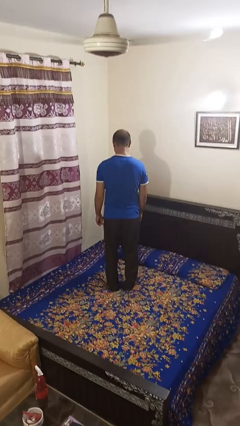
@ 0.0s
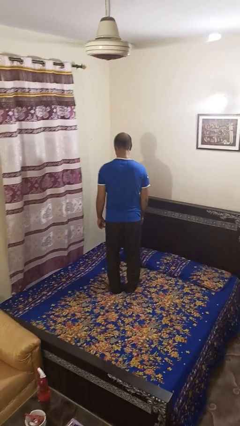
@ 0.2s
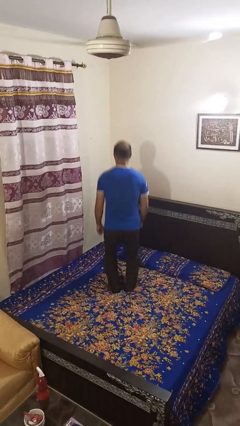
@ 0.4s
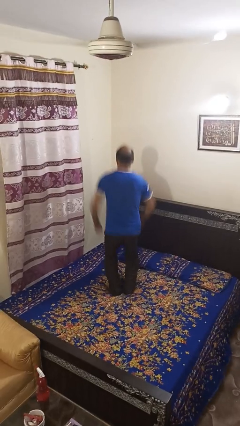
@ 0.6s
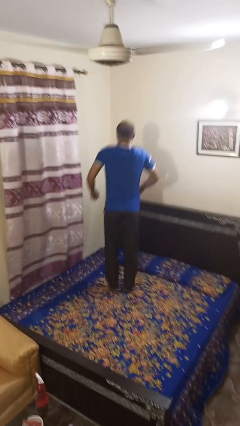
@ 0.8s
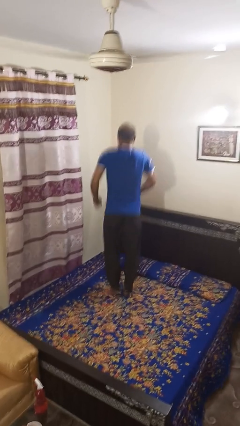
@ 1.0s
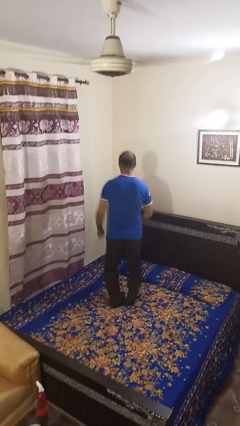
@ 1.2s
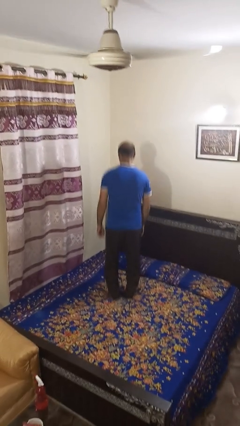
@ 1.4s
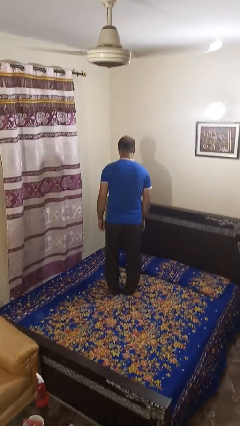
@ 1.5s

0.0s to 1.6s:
person jumps on bed

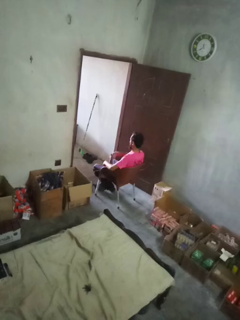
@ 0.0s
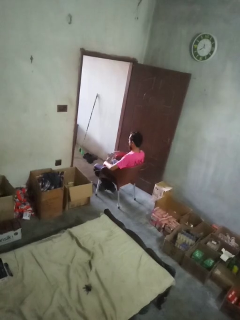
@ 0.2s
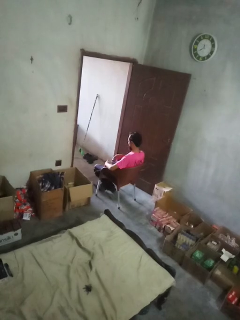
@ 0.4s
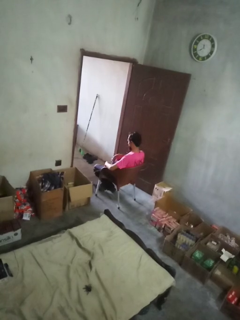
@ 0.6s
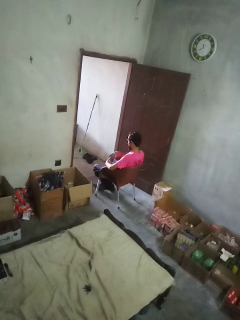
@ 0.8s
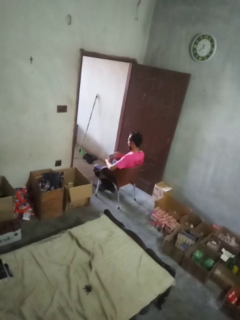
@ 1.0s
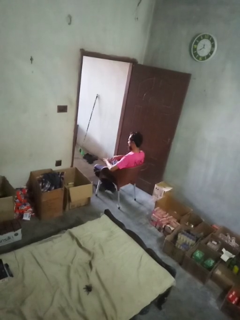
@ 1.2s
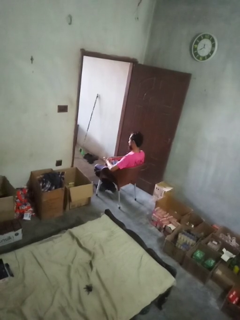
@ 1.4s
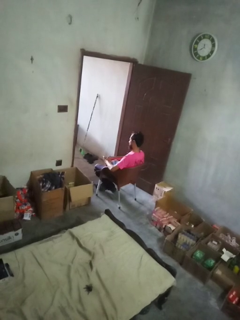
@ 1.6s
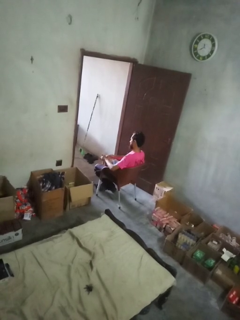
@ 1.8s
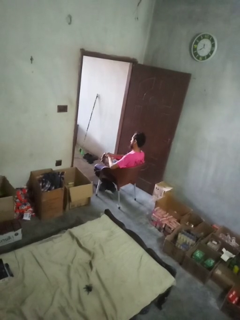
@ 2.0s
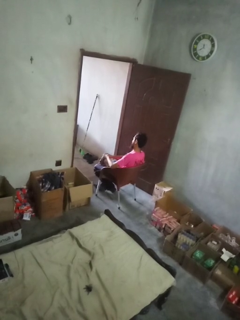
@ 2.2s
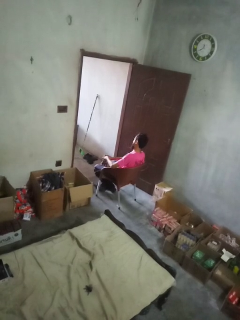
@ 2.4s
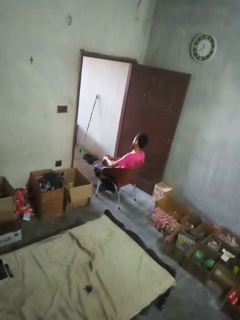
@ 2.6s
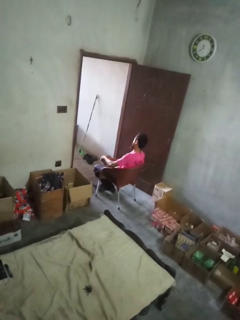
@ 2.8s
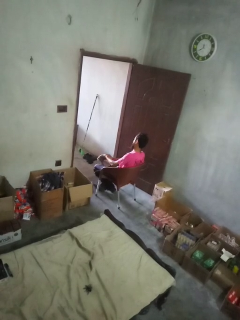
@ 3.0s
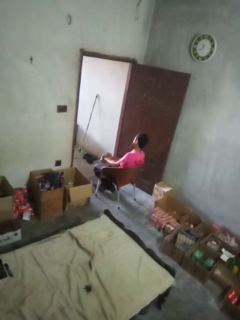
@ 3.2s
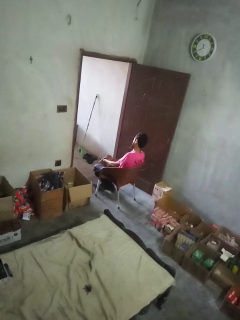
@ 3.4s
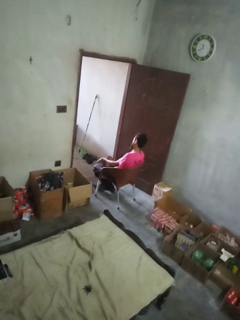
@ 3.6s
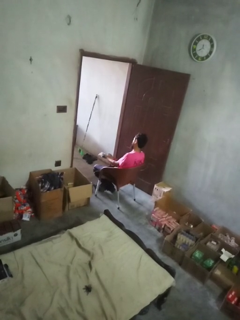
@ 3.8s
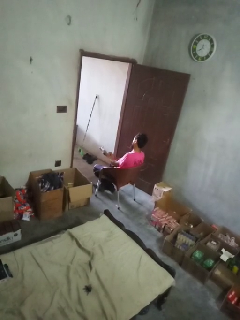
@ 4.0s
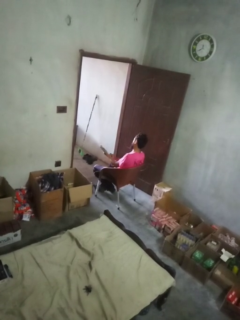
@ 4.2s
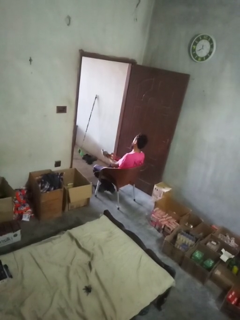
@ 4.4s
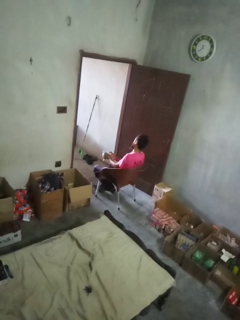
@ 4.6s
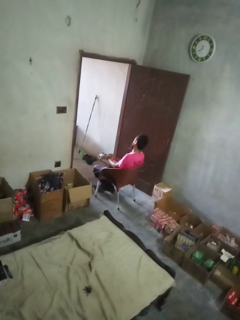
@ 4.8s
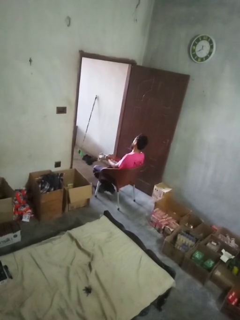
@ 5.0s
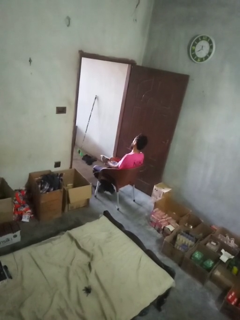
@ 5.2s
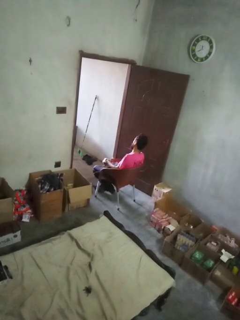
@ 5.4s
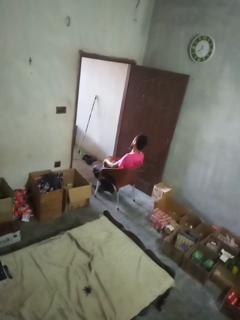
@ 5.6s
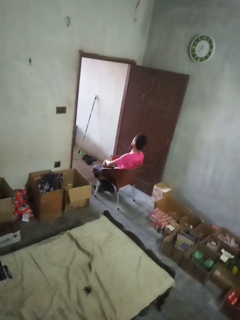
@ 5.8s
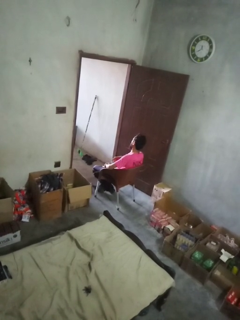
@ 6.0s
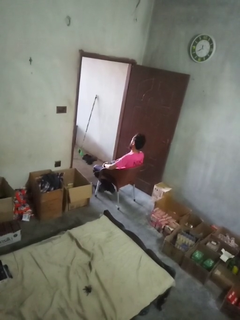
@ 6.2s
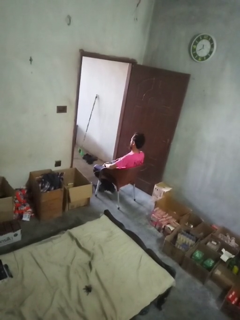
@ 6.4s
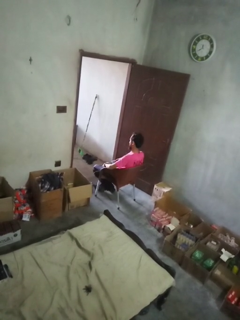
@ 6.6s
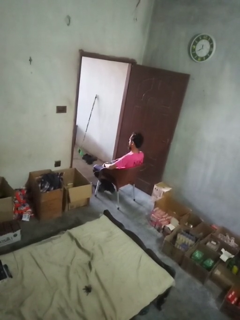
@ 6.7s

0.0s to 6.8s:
person puts on gloves

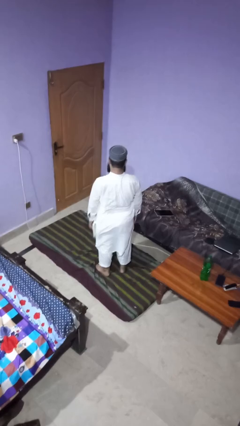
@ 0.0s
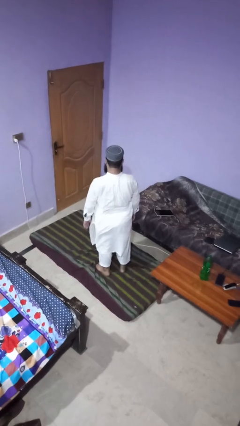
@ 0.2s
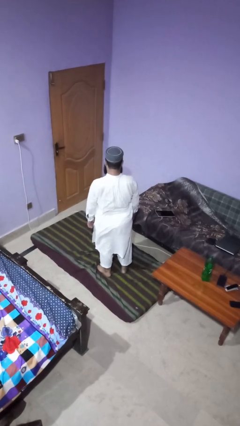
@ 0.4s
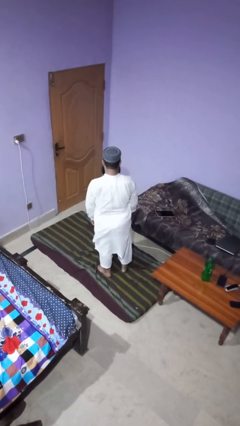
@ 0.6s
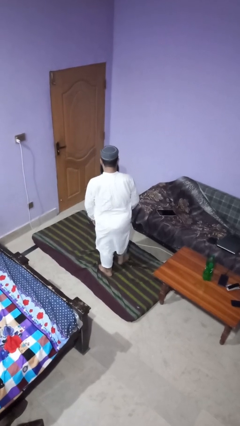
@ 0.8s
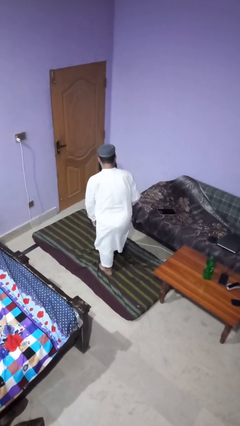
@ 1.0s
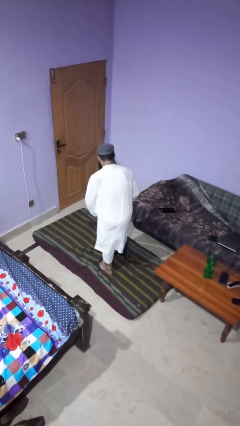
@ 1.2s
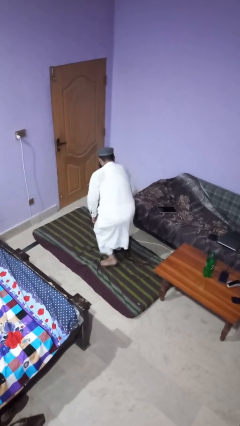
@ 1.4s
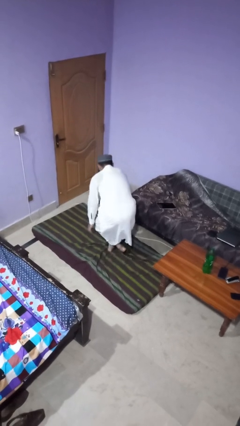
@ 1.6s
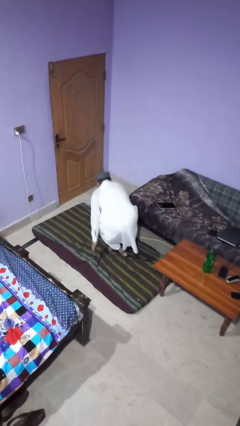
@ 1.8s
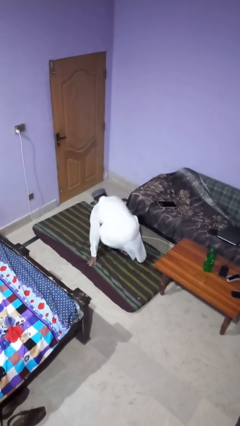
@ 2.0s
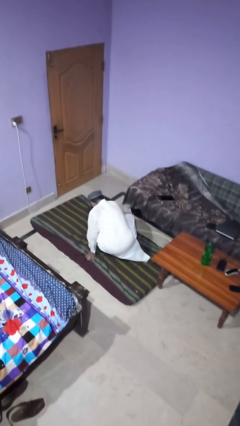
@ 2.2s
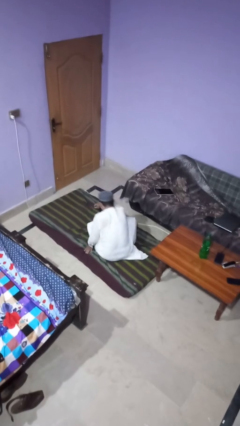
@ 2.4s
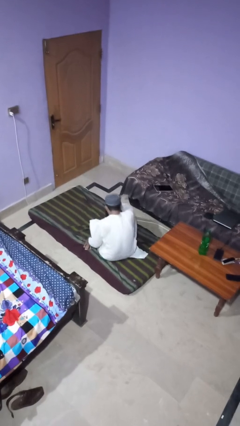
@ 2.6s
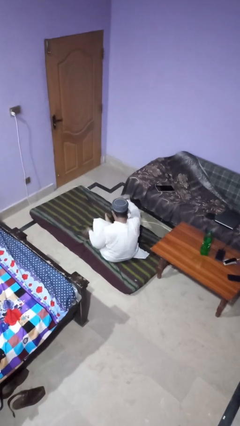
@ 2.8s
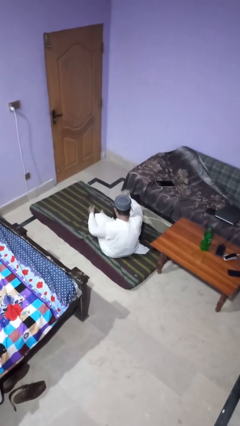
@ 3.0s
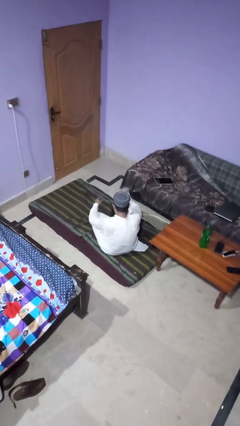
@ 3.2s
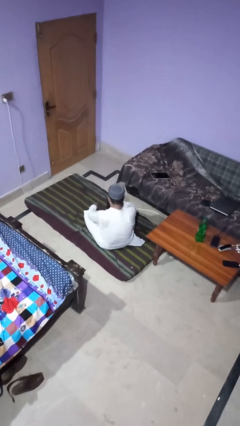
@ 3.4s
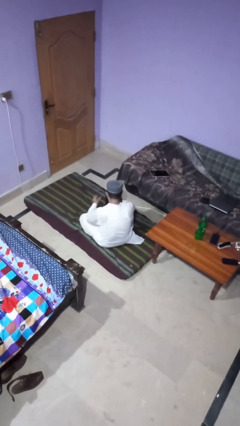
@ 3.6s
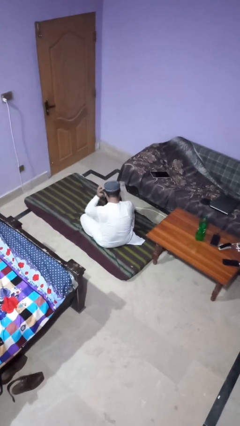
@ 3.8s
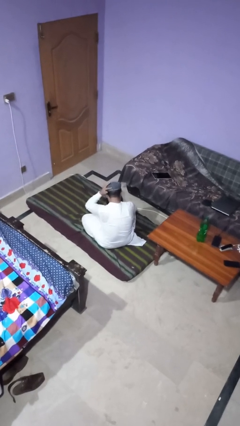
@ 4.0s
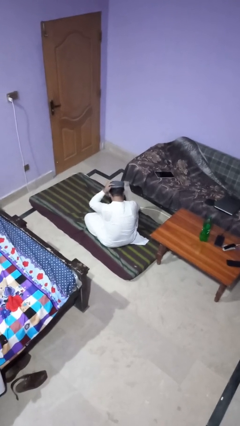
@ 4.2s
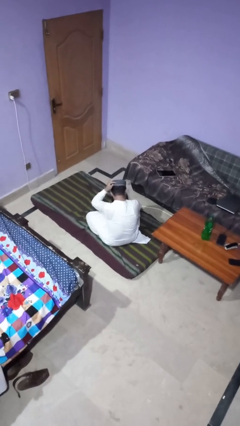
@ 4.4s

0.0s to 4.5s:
person sits crisscross

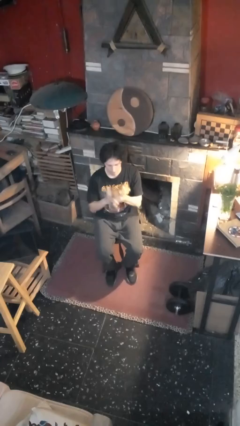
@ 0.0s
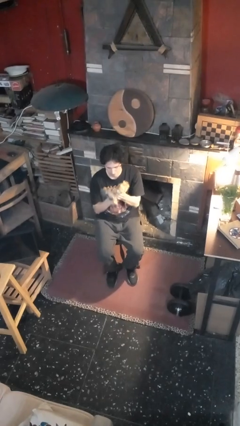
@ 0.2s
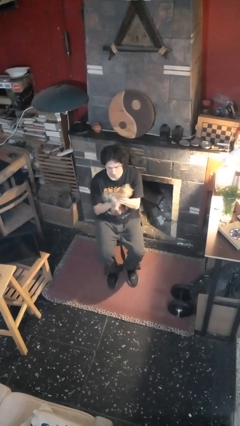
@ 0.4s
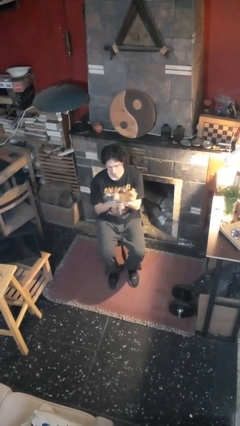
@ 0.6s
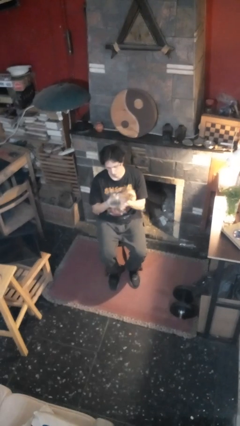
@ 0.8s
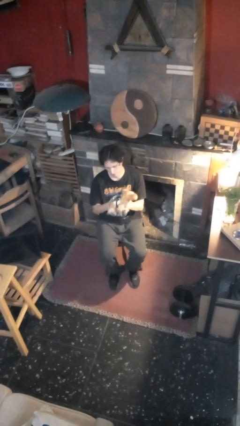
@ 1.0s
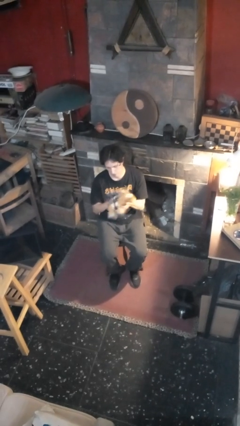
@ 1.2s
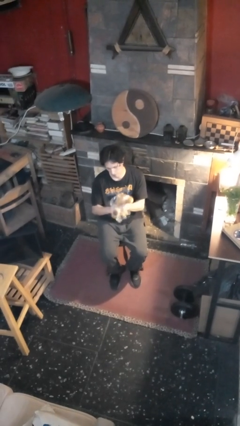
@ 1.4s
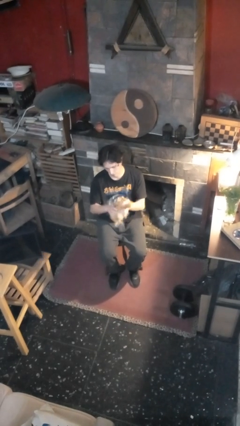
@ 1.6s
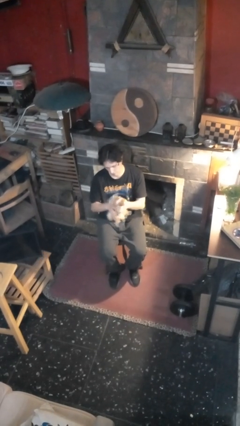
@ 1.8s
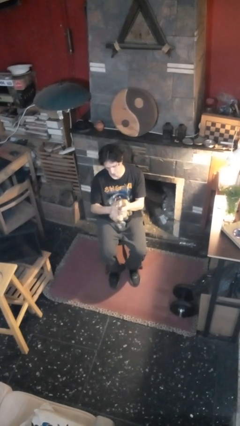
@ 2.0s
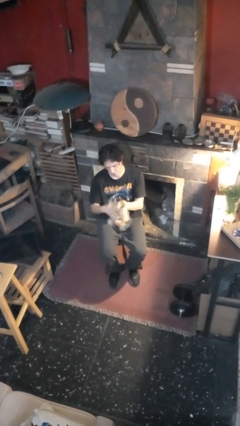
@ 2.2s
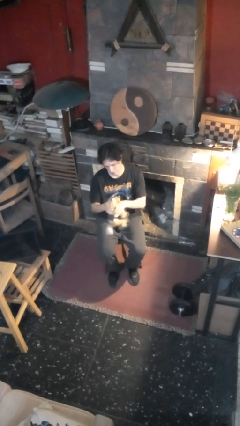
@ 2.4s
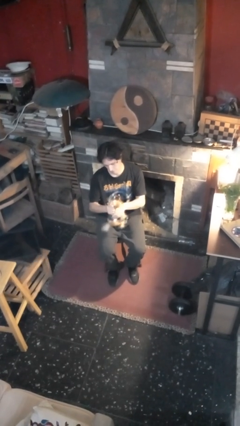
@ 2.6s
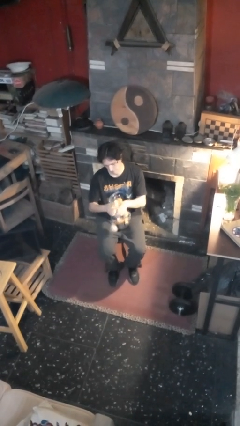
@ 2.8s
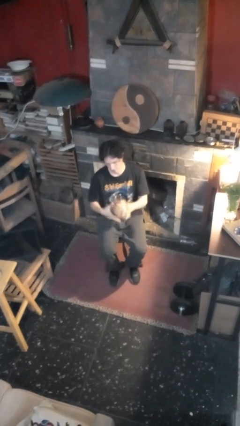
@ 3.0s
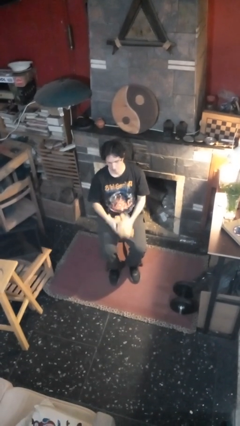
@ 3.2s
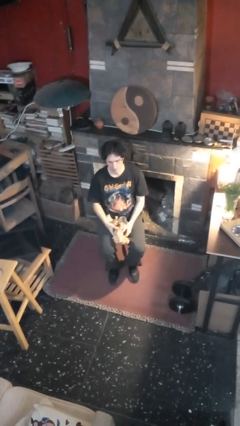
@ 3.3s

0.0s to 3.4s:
person squeezes object

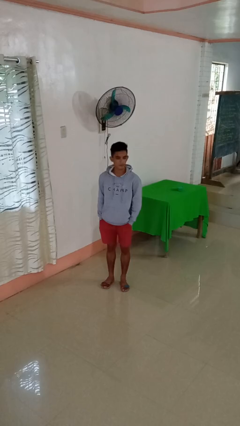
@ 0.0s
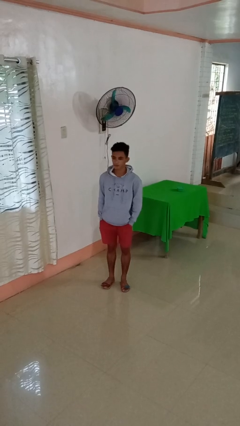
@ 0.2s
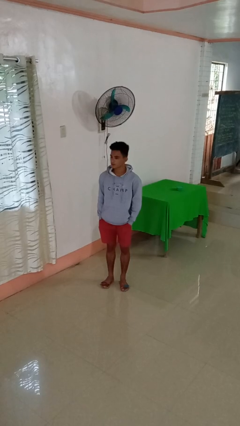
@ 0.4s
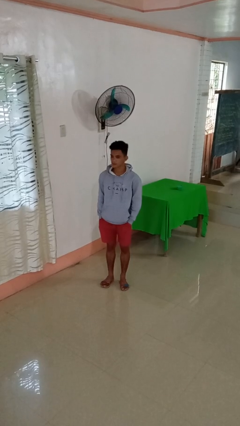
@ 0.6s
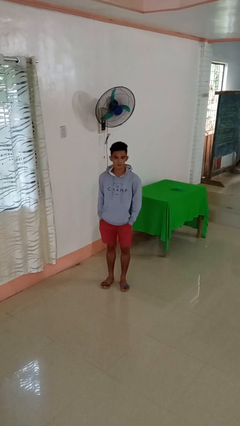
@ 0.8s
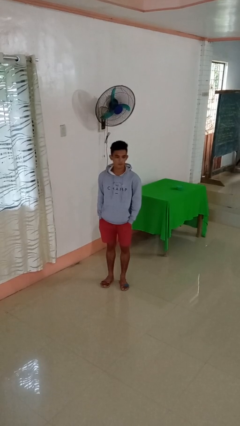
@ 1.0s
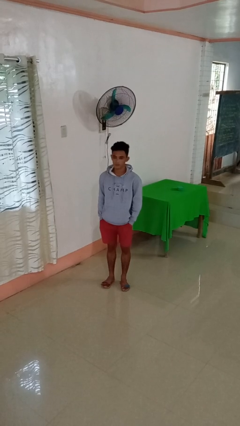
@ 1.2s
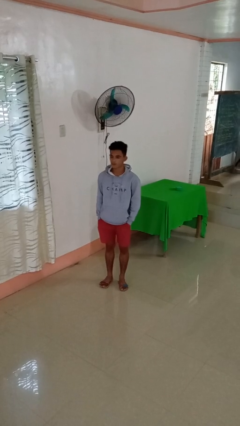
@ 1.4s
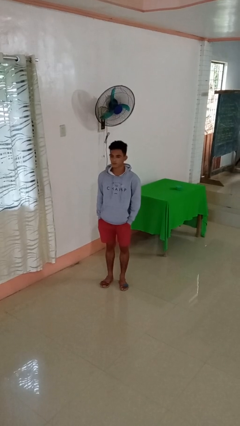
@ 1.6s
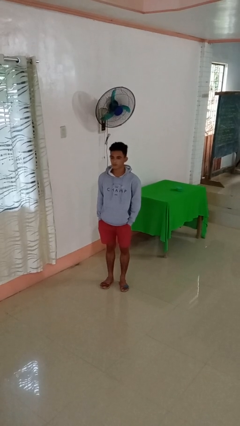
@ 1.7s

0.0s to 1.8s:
person shakes head

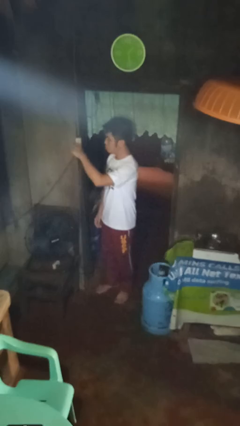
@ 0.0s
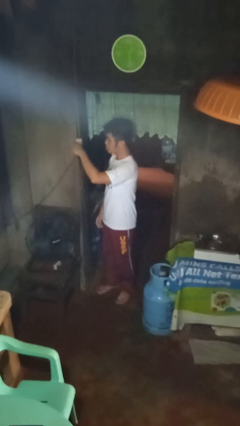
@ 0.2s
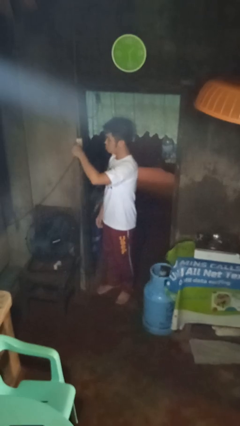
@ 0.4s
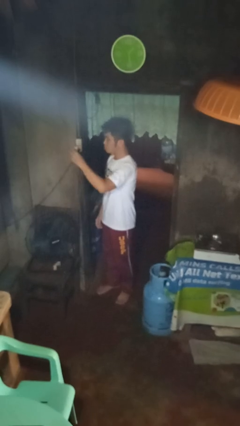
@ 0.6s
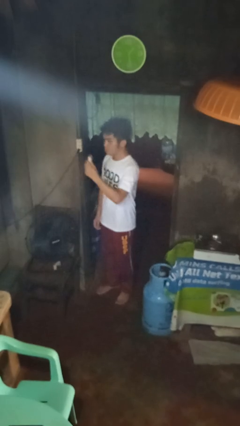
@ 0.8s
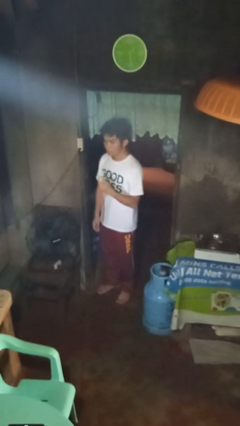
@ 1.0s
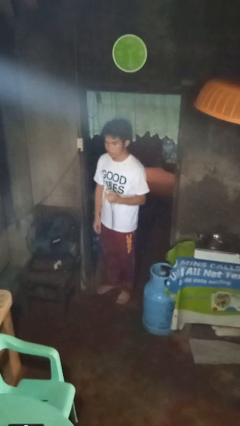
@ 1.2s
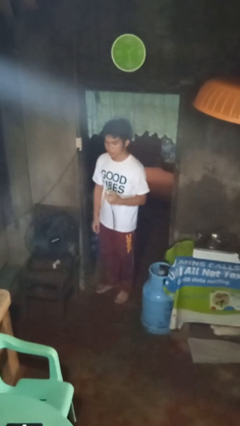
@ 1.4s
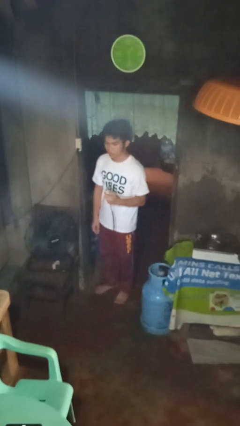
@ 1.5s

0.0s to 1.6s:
person unplugs from electrical socket
